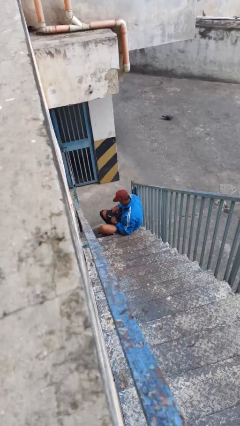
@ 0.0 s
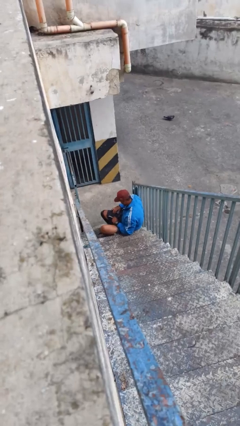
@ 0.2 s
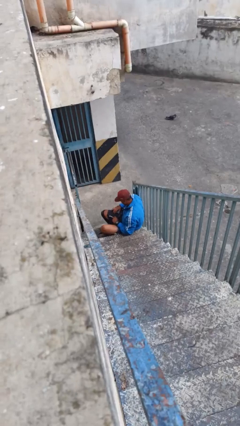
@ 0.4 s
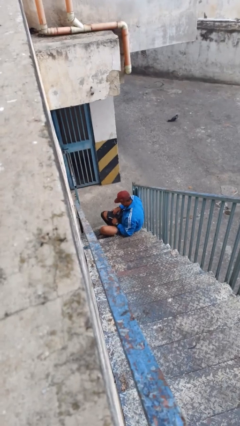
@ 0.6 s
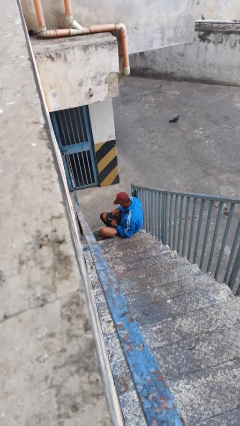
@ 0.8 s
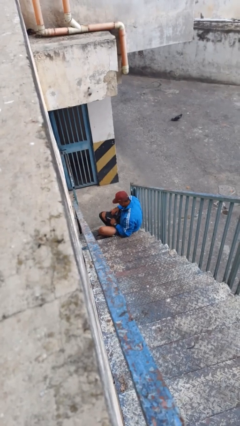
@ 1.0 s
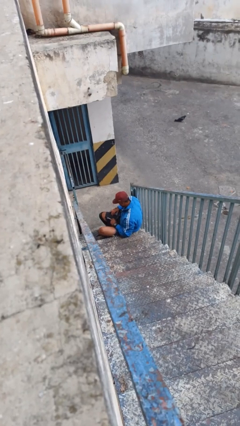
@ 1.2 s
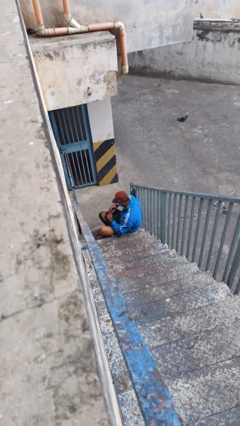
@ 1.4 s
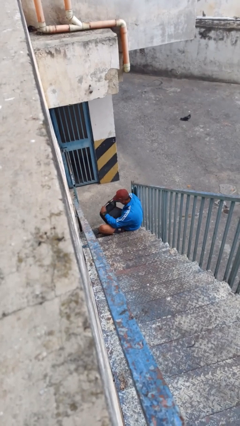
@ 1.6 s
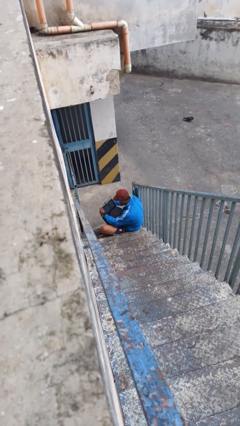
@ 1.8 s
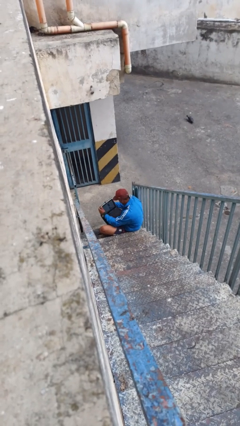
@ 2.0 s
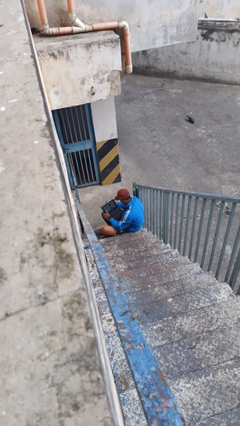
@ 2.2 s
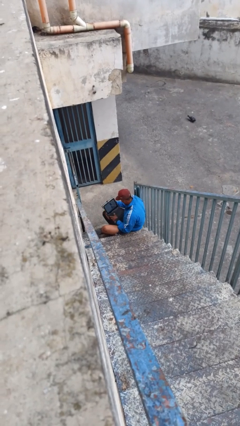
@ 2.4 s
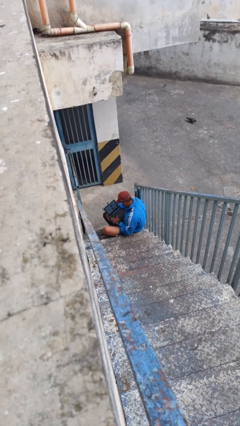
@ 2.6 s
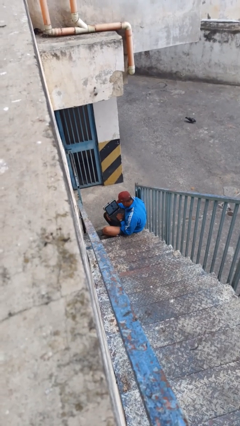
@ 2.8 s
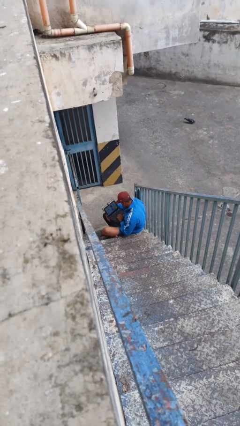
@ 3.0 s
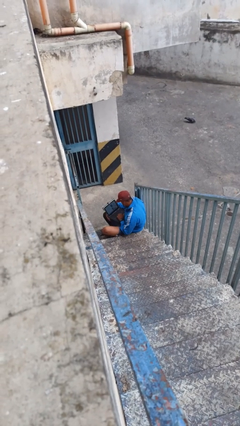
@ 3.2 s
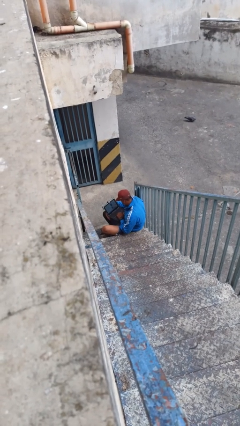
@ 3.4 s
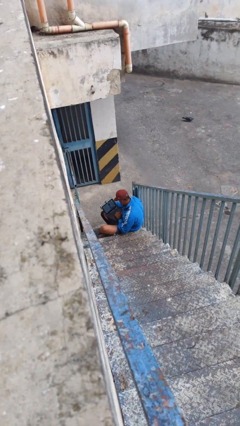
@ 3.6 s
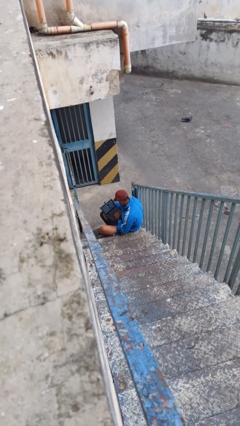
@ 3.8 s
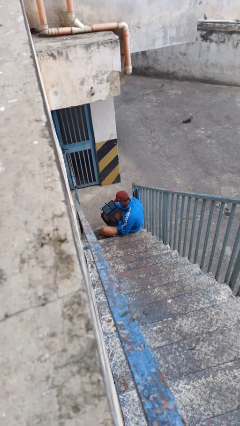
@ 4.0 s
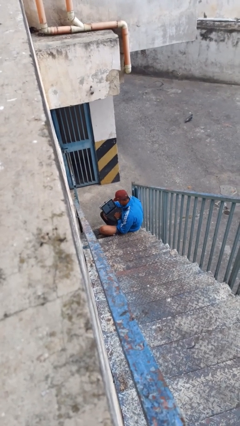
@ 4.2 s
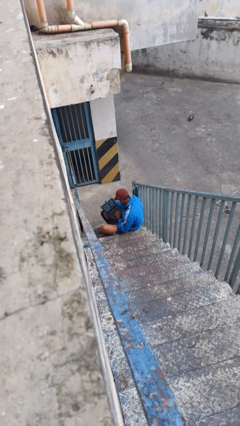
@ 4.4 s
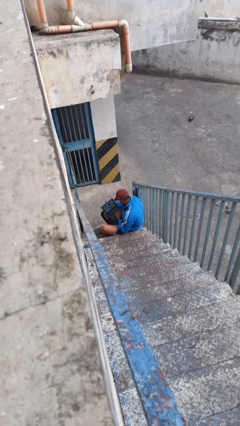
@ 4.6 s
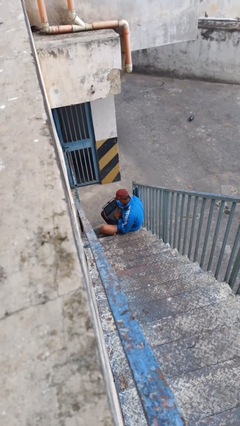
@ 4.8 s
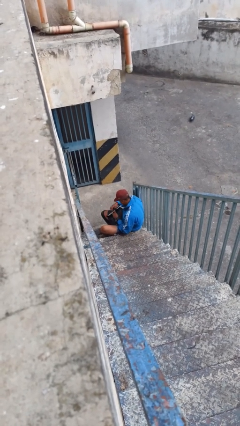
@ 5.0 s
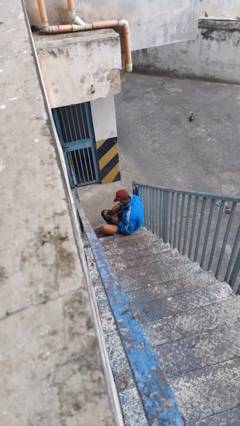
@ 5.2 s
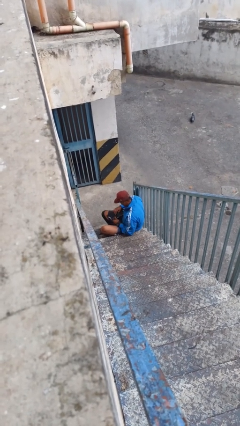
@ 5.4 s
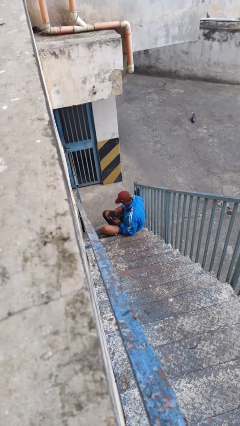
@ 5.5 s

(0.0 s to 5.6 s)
person interacts with laptop

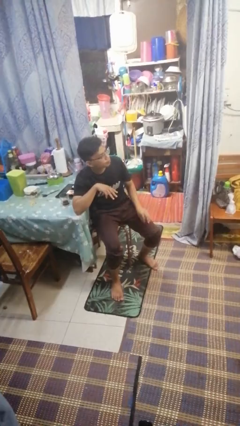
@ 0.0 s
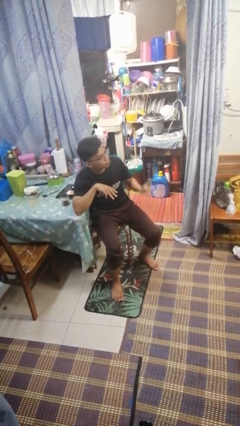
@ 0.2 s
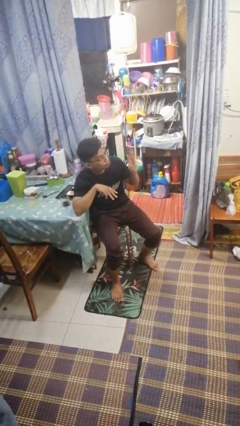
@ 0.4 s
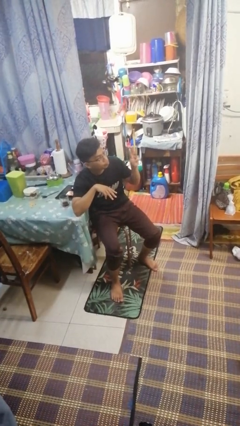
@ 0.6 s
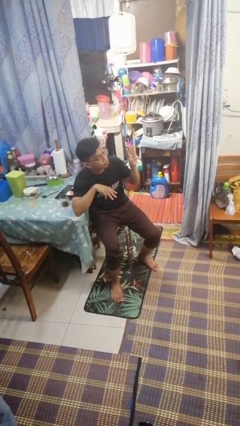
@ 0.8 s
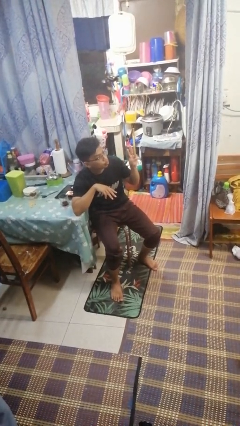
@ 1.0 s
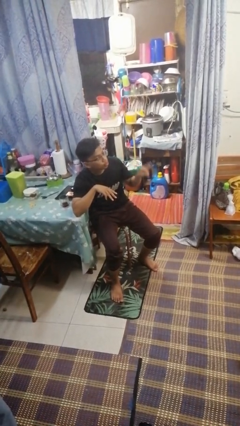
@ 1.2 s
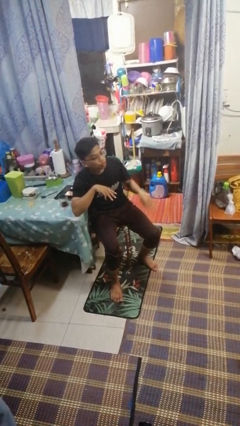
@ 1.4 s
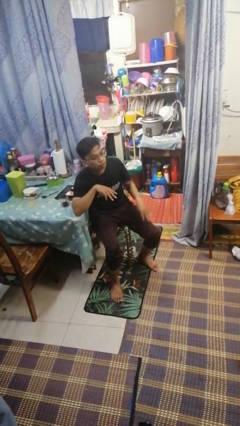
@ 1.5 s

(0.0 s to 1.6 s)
person gestures number three

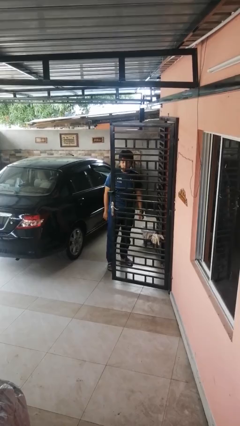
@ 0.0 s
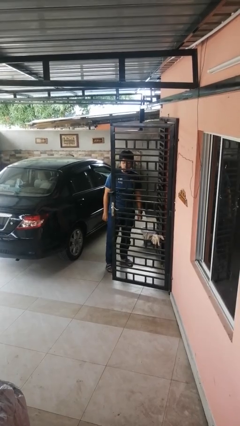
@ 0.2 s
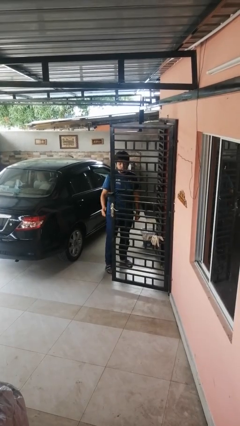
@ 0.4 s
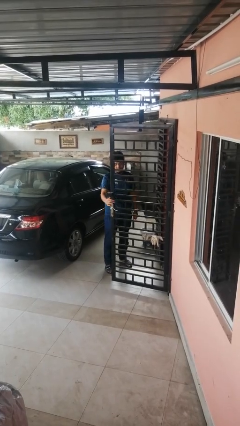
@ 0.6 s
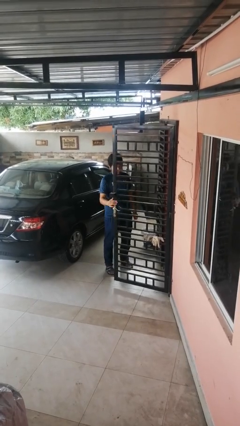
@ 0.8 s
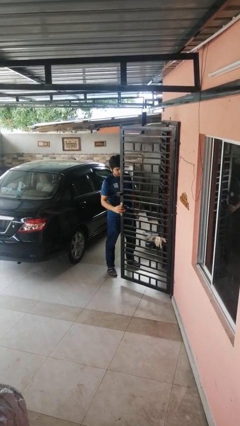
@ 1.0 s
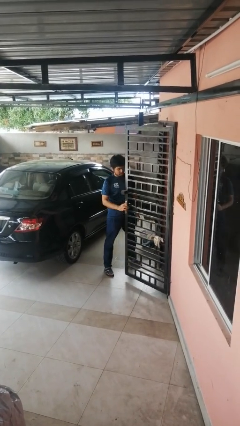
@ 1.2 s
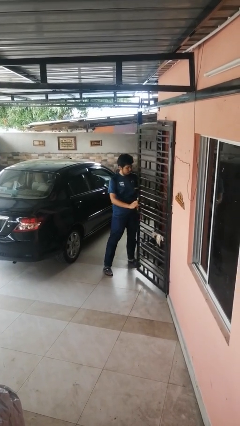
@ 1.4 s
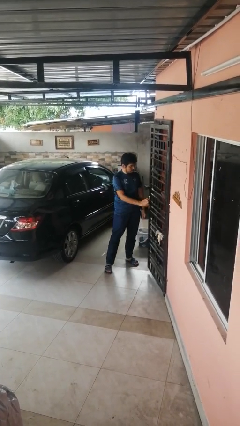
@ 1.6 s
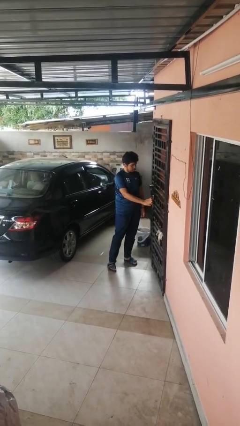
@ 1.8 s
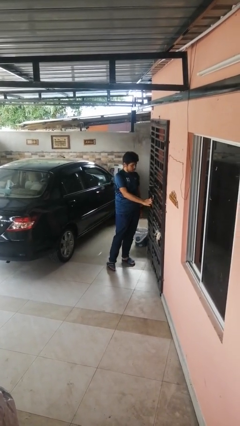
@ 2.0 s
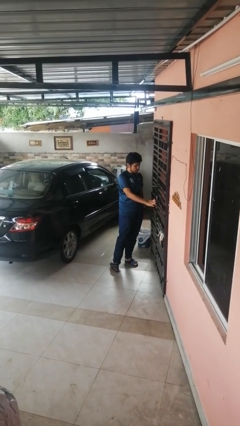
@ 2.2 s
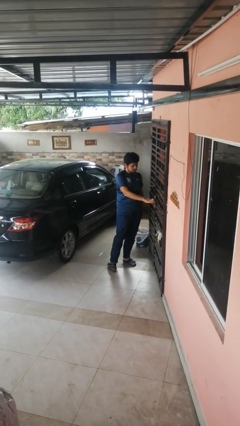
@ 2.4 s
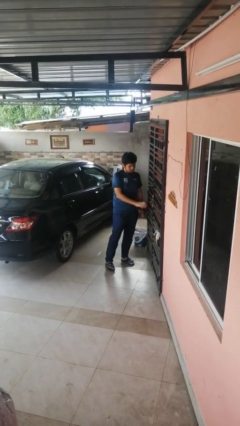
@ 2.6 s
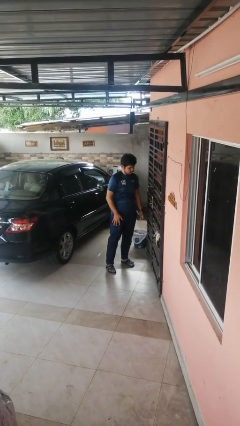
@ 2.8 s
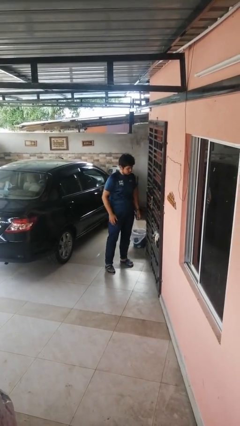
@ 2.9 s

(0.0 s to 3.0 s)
person closes gate

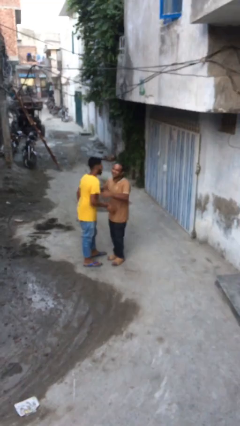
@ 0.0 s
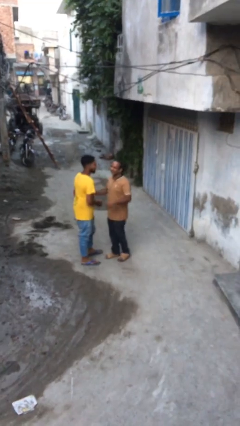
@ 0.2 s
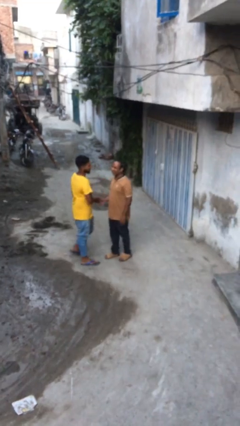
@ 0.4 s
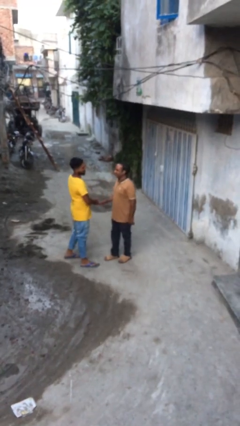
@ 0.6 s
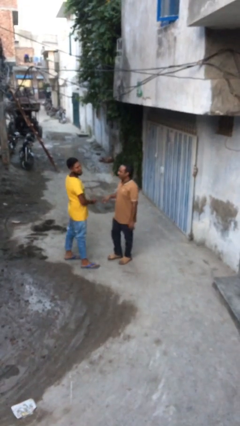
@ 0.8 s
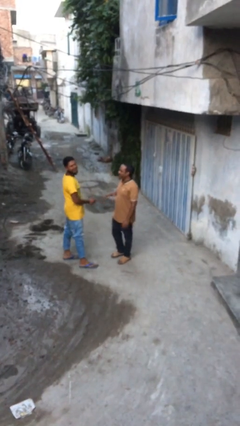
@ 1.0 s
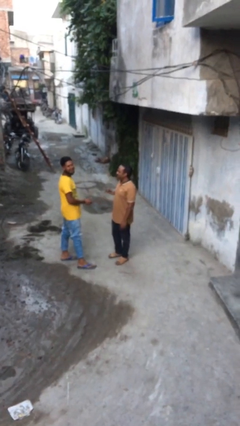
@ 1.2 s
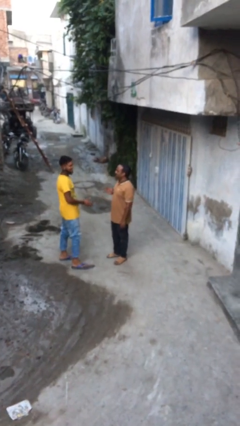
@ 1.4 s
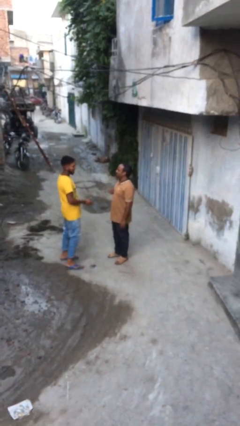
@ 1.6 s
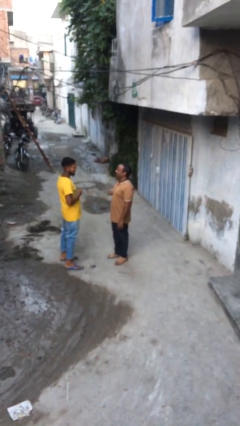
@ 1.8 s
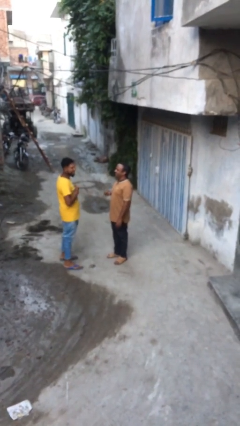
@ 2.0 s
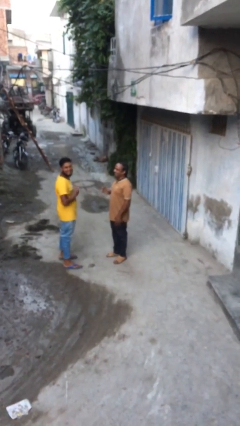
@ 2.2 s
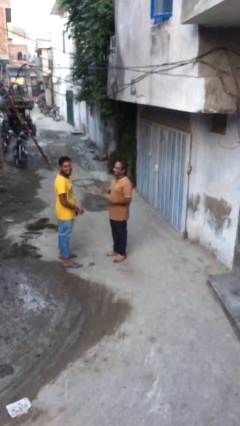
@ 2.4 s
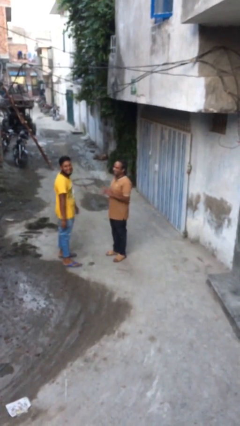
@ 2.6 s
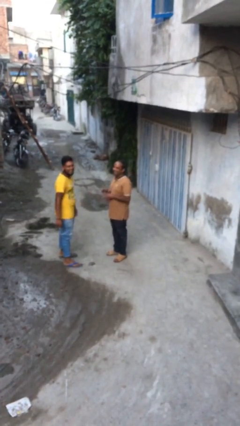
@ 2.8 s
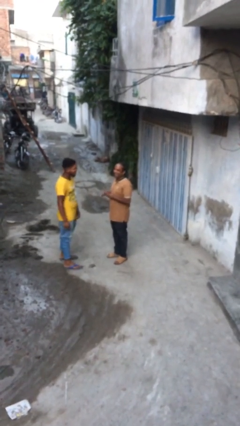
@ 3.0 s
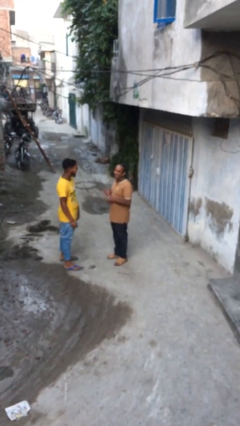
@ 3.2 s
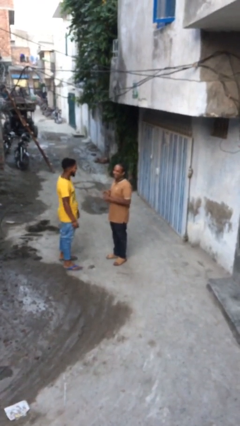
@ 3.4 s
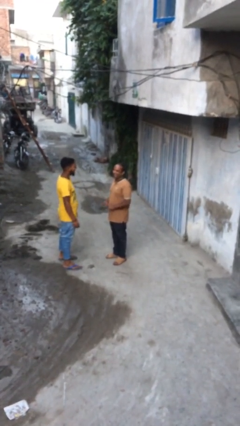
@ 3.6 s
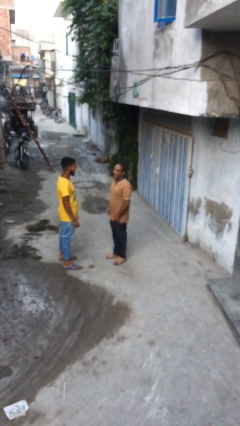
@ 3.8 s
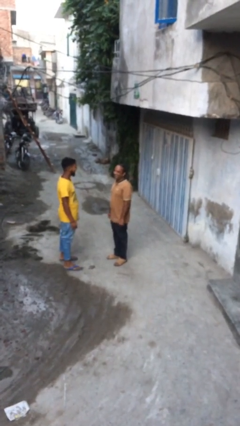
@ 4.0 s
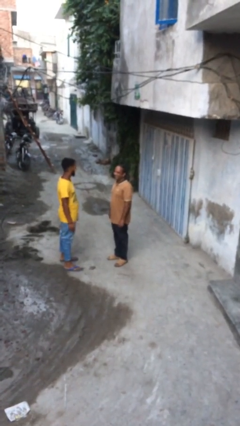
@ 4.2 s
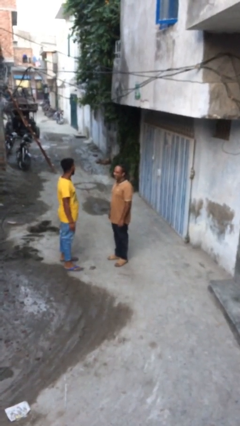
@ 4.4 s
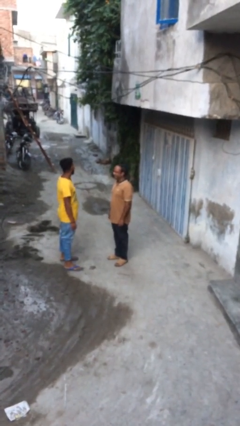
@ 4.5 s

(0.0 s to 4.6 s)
person talks to person

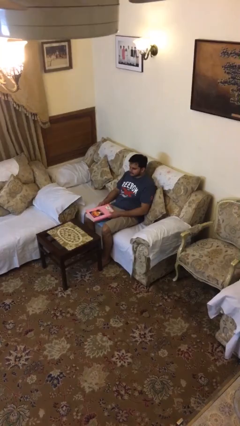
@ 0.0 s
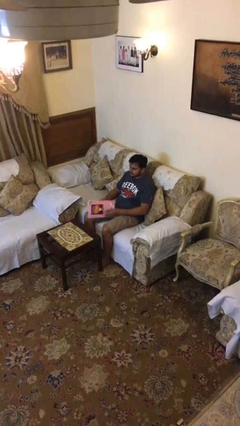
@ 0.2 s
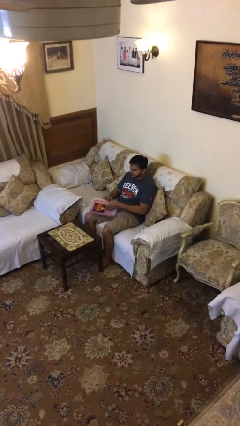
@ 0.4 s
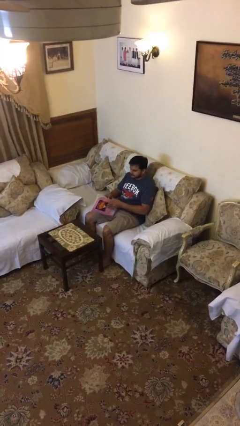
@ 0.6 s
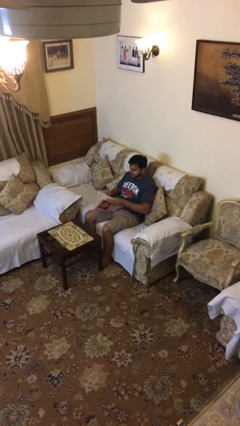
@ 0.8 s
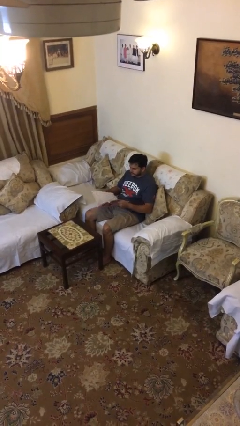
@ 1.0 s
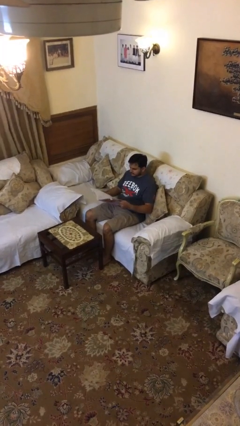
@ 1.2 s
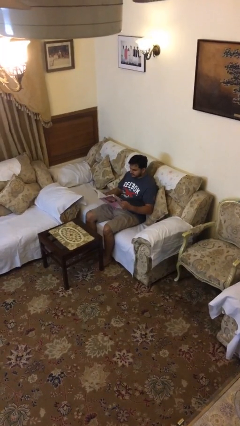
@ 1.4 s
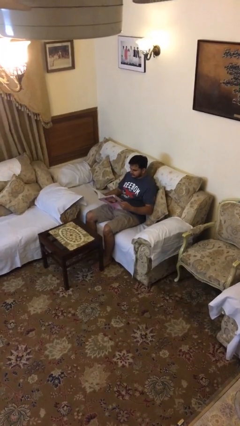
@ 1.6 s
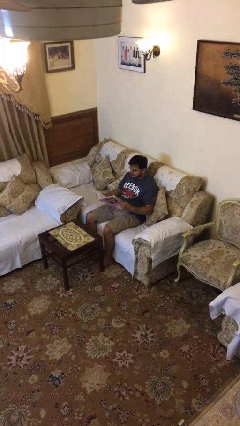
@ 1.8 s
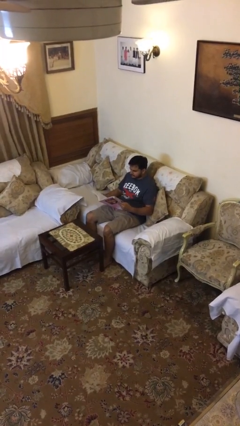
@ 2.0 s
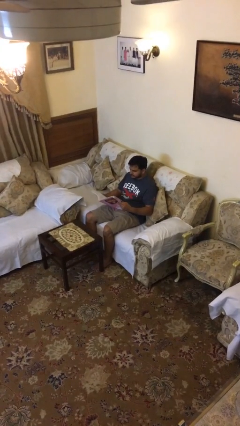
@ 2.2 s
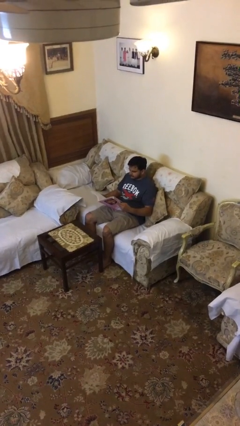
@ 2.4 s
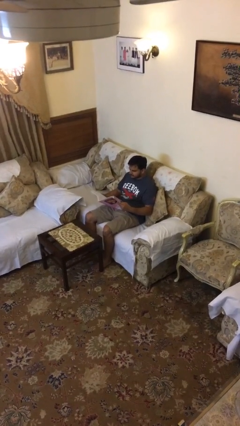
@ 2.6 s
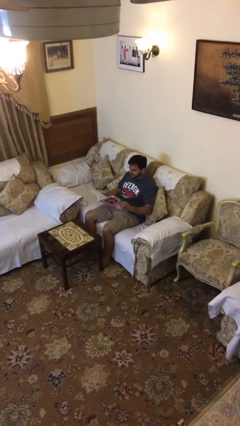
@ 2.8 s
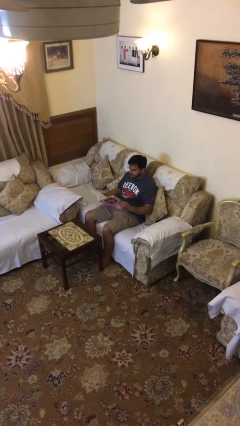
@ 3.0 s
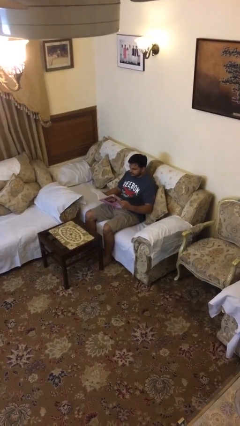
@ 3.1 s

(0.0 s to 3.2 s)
person reads document
